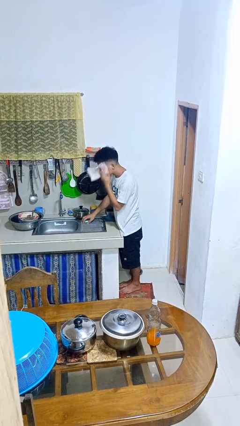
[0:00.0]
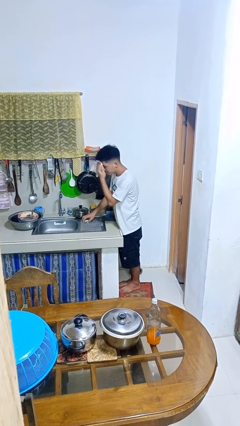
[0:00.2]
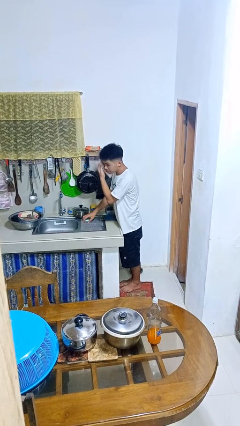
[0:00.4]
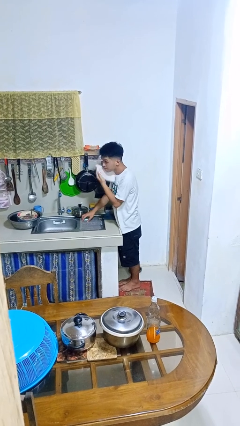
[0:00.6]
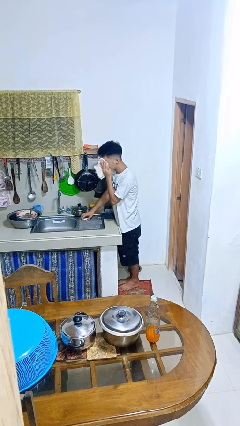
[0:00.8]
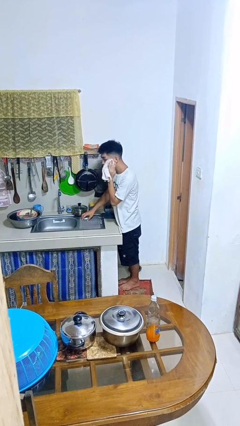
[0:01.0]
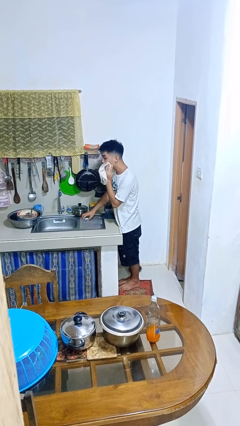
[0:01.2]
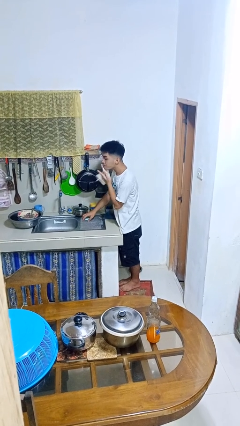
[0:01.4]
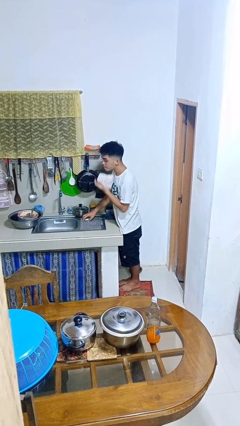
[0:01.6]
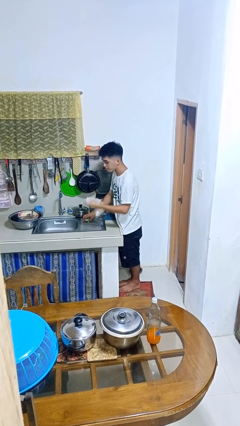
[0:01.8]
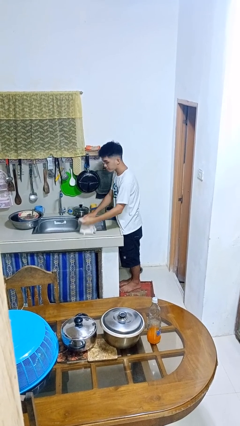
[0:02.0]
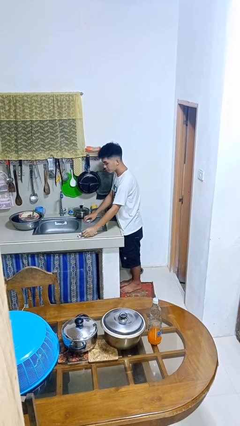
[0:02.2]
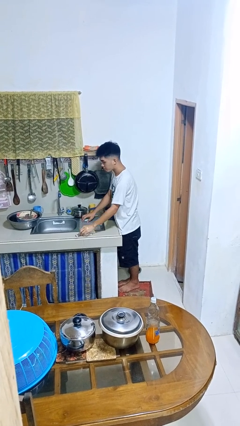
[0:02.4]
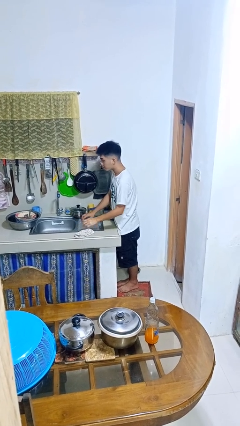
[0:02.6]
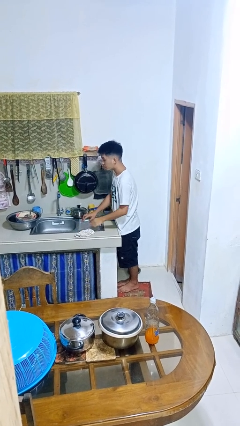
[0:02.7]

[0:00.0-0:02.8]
person dries face with towel

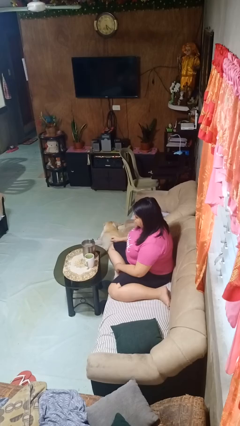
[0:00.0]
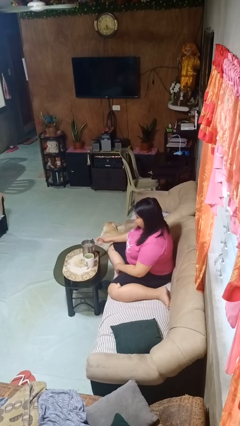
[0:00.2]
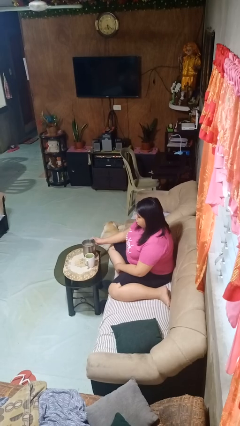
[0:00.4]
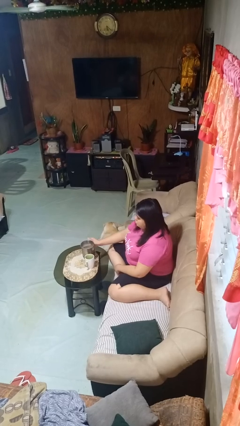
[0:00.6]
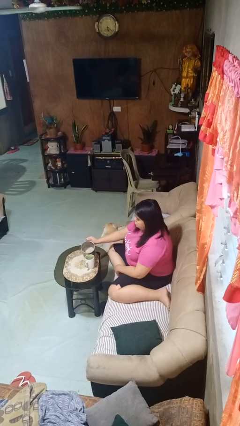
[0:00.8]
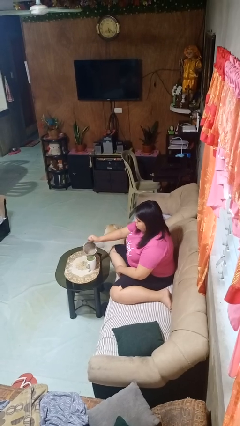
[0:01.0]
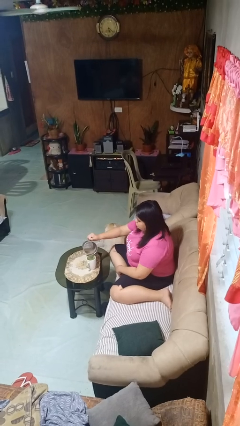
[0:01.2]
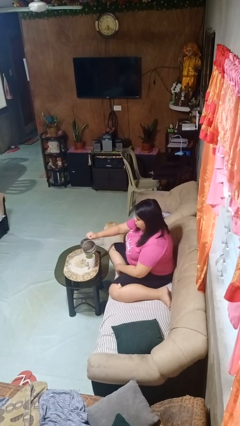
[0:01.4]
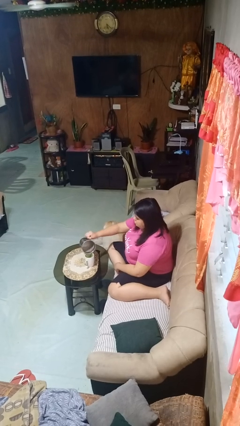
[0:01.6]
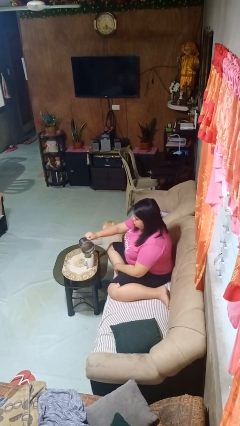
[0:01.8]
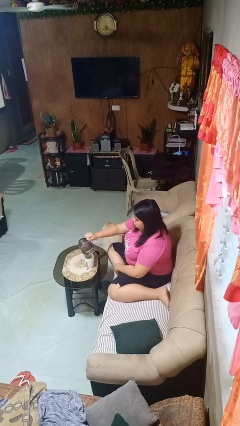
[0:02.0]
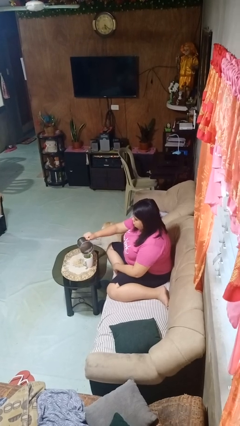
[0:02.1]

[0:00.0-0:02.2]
person pours coffee into mug

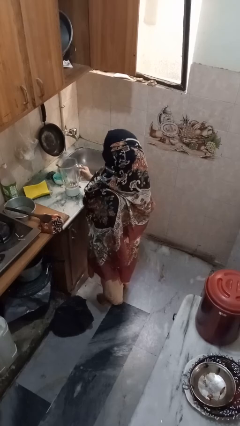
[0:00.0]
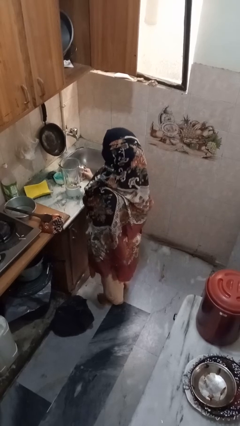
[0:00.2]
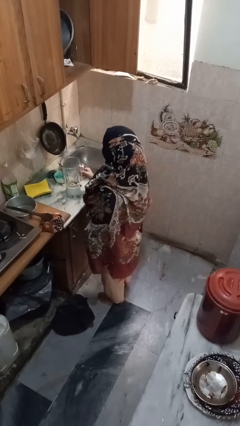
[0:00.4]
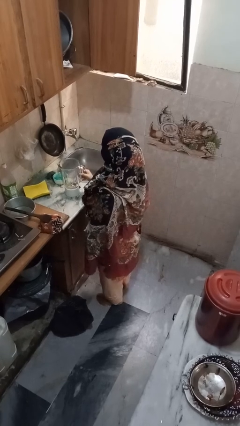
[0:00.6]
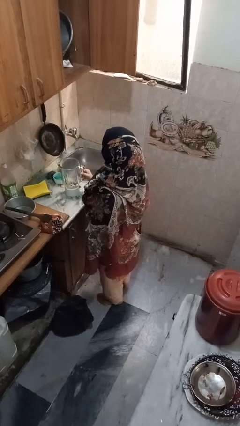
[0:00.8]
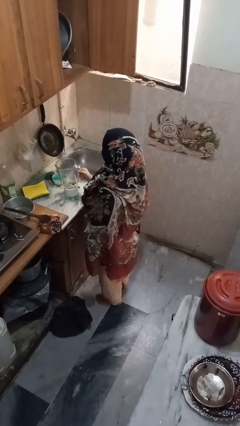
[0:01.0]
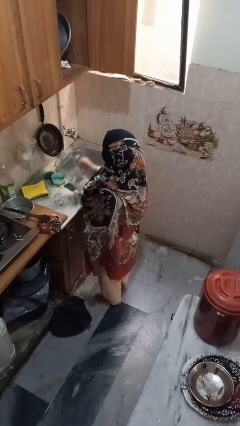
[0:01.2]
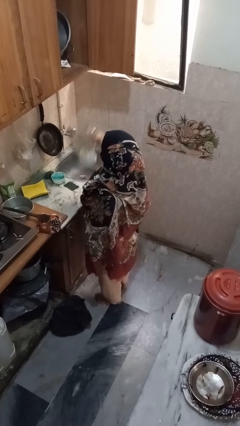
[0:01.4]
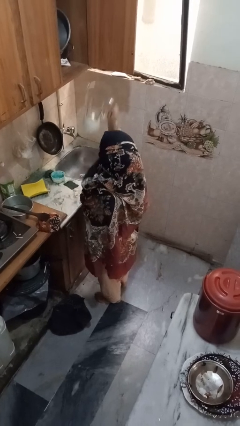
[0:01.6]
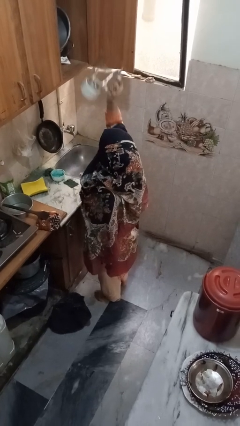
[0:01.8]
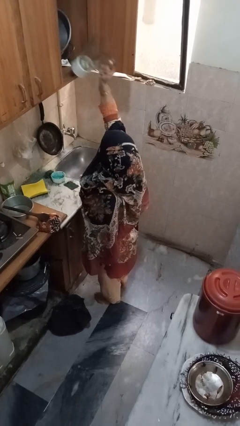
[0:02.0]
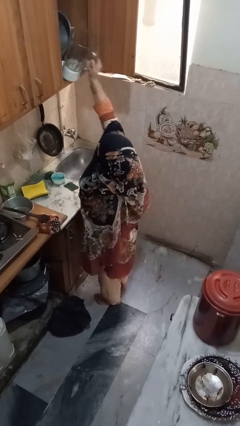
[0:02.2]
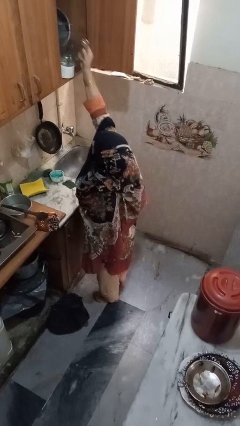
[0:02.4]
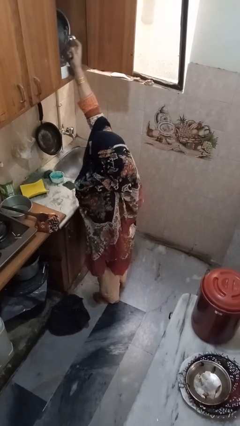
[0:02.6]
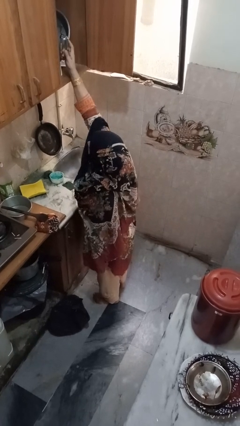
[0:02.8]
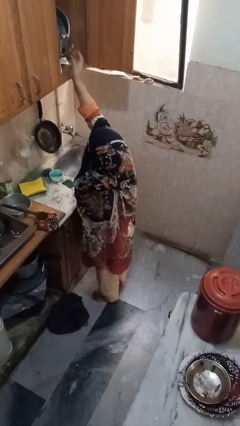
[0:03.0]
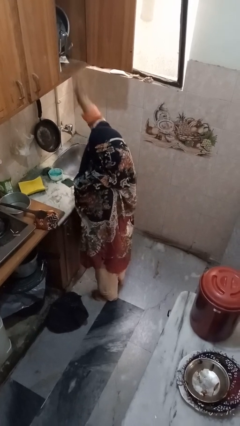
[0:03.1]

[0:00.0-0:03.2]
person takes object from cabinet

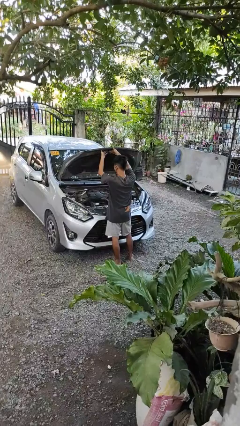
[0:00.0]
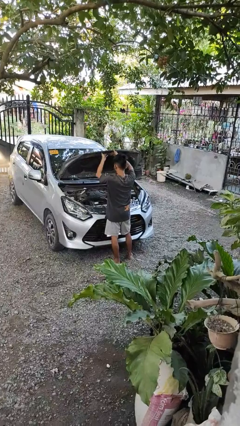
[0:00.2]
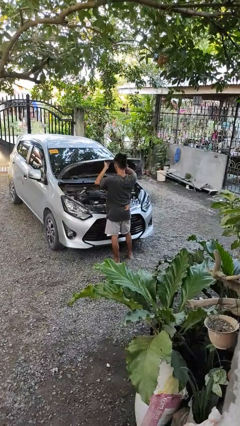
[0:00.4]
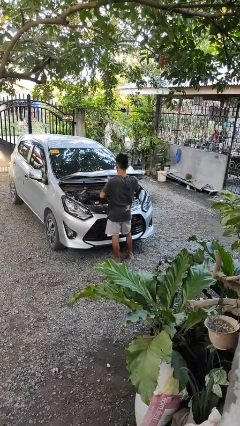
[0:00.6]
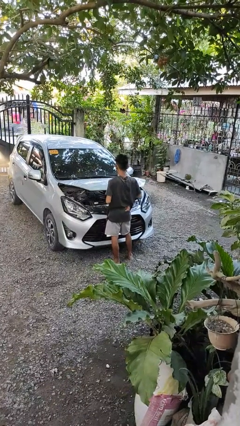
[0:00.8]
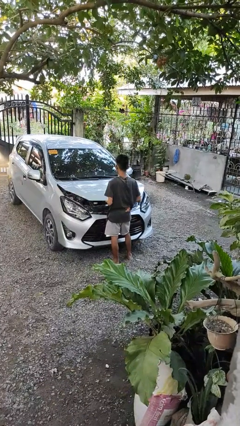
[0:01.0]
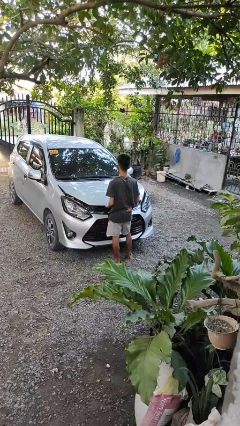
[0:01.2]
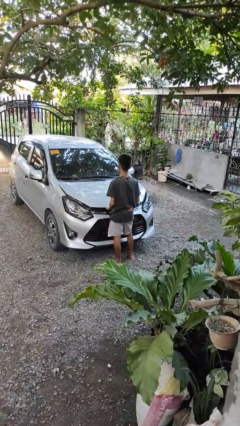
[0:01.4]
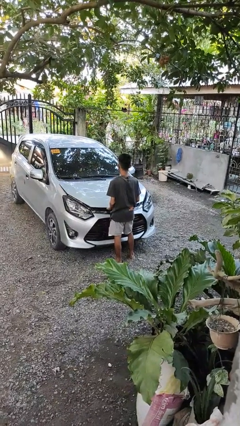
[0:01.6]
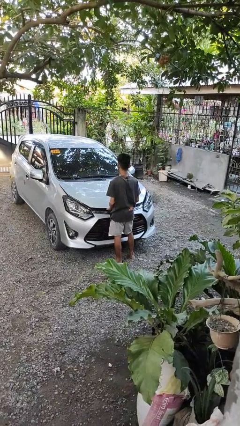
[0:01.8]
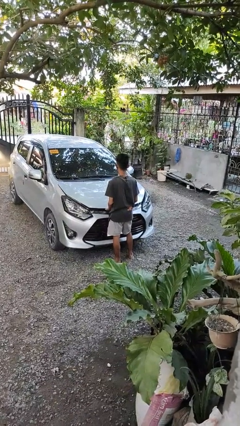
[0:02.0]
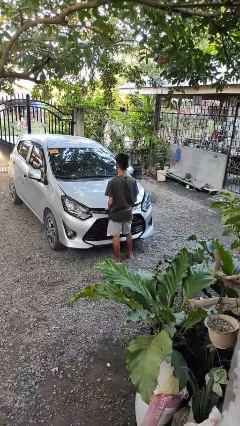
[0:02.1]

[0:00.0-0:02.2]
person closes car hood

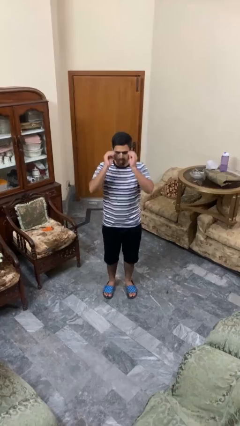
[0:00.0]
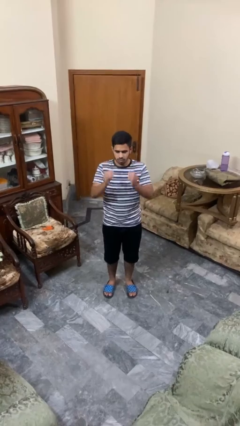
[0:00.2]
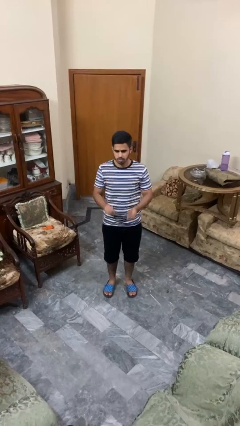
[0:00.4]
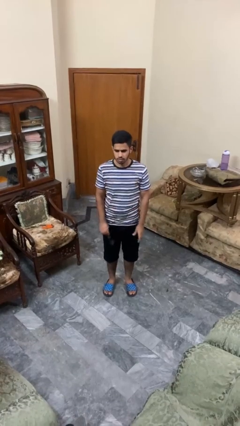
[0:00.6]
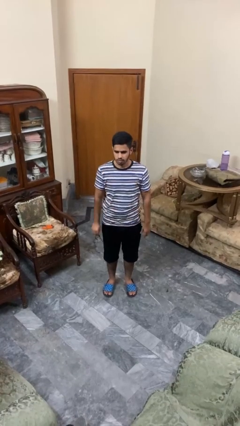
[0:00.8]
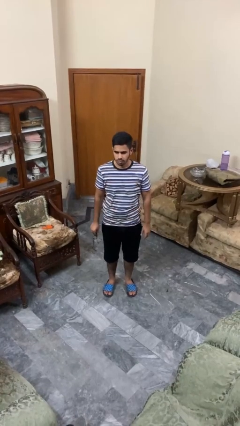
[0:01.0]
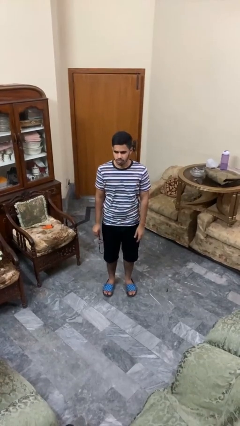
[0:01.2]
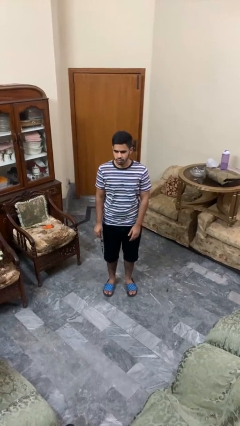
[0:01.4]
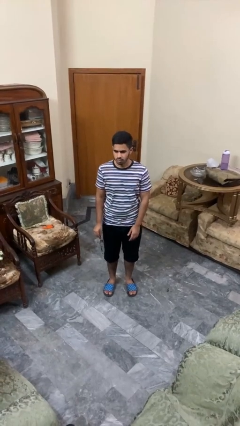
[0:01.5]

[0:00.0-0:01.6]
person takes off glasses

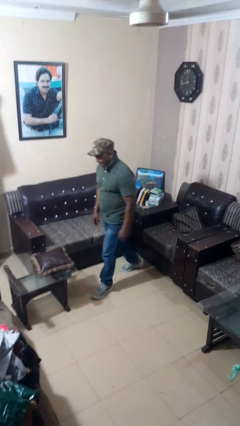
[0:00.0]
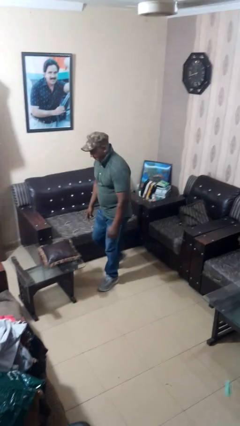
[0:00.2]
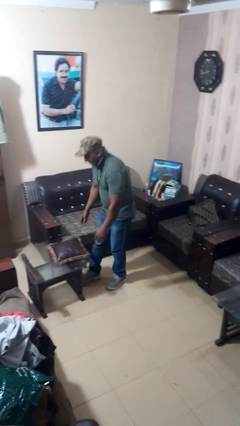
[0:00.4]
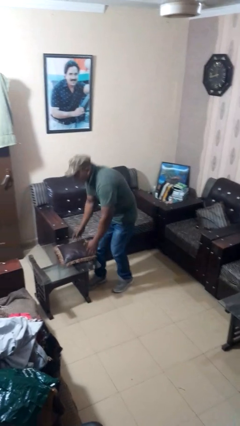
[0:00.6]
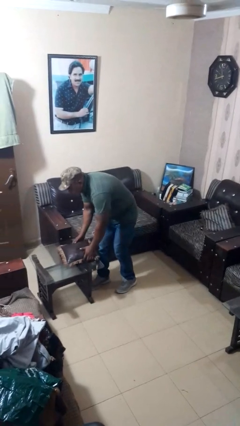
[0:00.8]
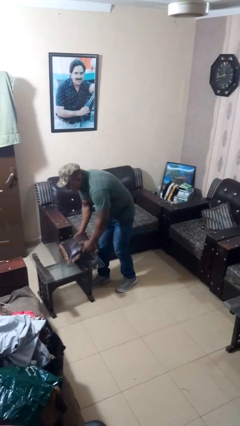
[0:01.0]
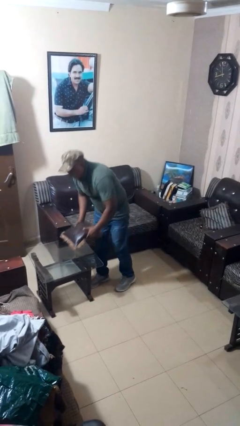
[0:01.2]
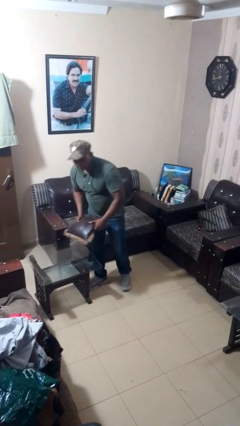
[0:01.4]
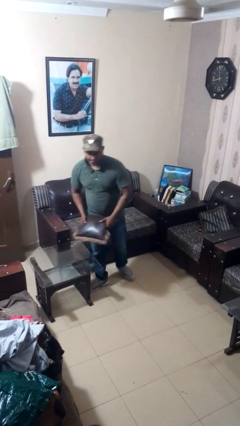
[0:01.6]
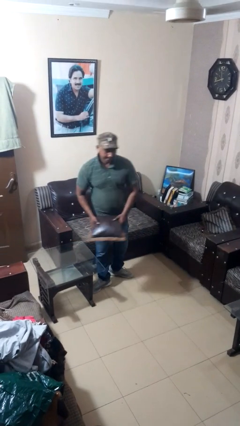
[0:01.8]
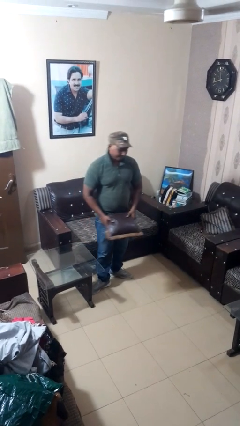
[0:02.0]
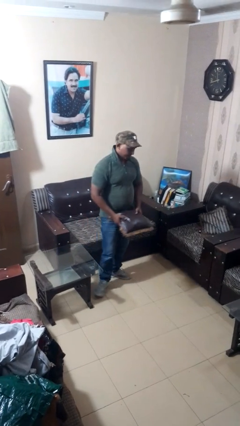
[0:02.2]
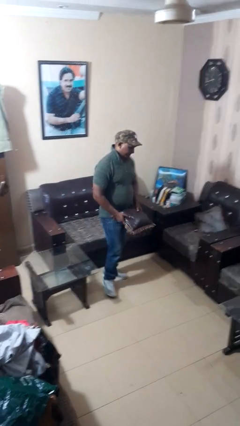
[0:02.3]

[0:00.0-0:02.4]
person picks up object from table

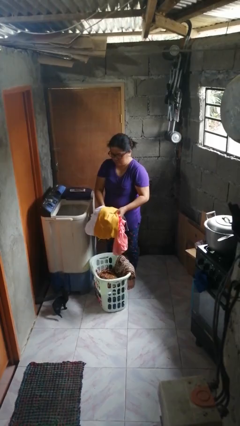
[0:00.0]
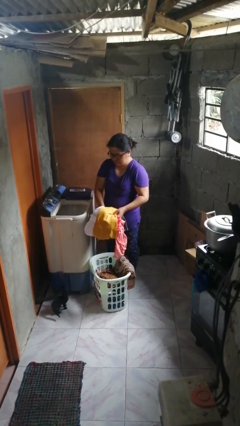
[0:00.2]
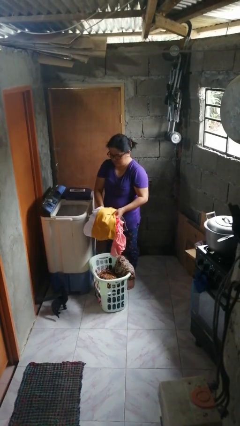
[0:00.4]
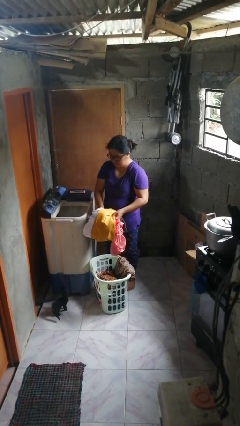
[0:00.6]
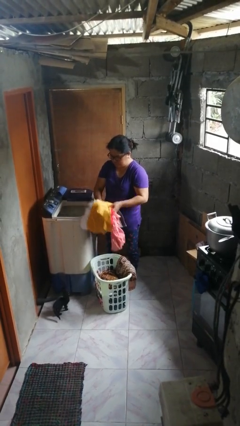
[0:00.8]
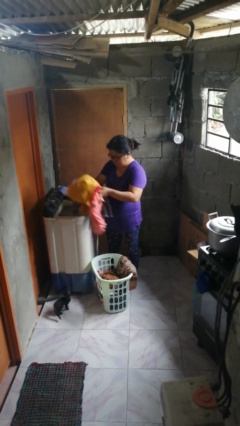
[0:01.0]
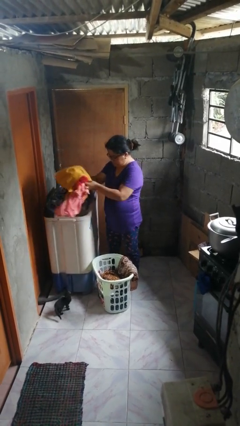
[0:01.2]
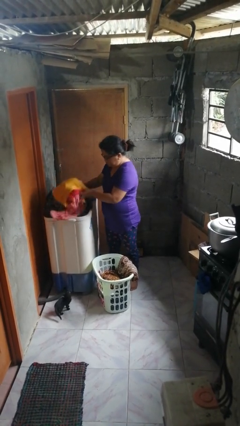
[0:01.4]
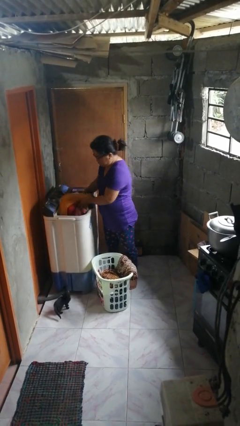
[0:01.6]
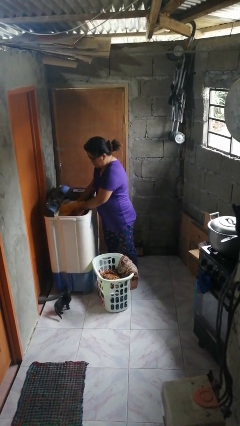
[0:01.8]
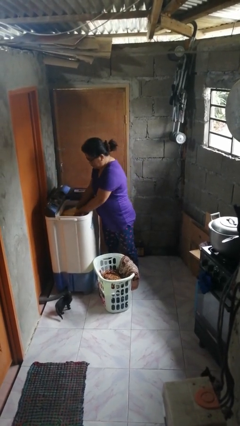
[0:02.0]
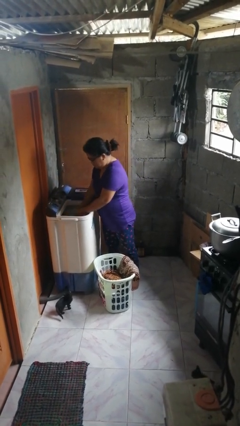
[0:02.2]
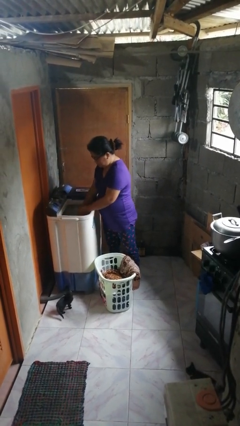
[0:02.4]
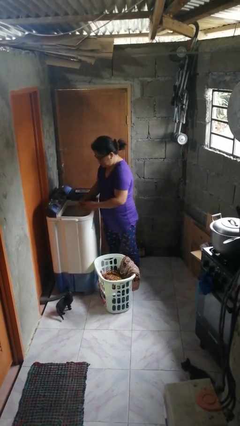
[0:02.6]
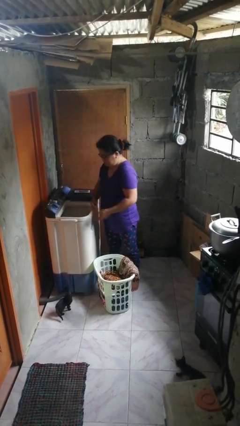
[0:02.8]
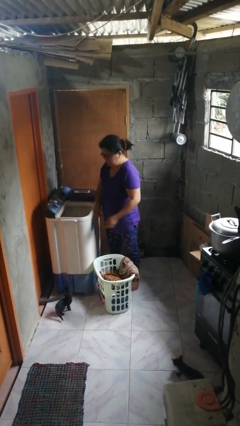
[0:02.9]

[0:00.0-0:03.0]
person loads clotheswasher
